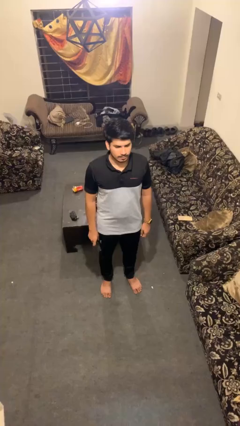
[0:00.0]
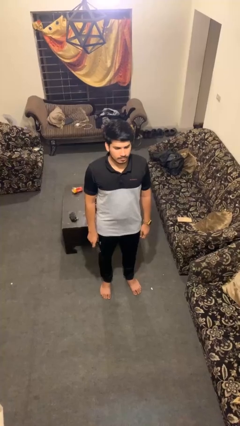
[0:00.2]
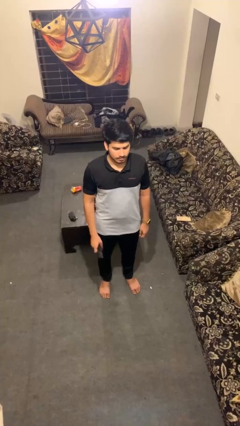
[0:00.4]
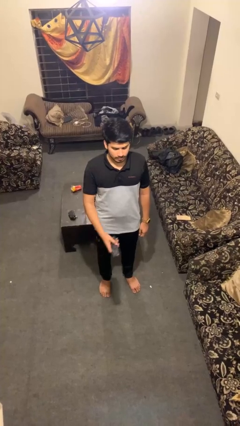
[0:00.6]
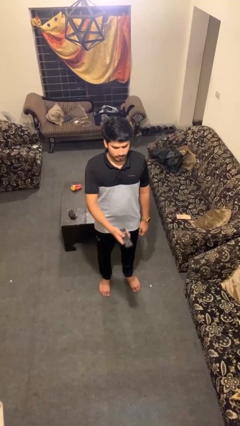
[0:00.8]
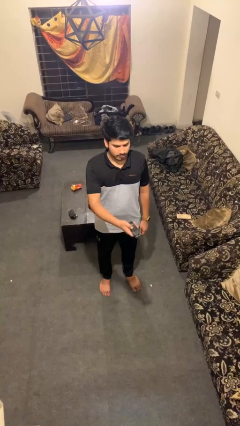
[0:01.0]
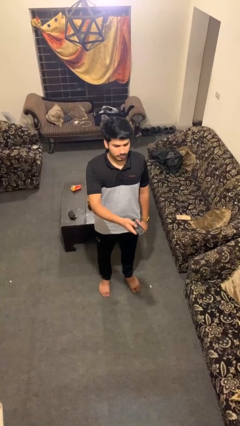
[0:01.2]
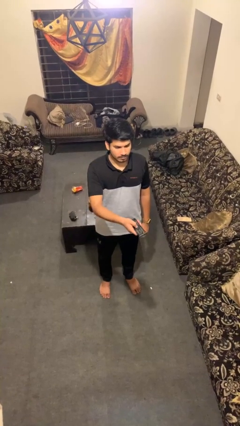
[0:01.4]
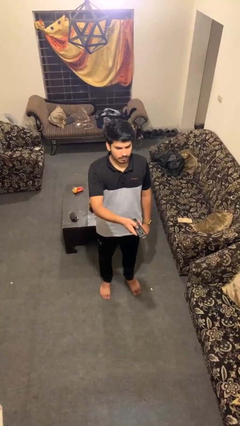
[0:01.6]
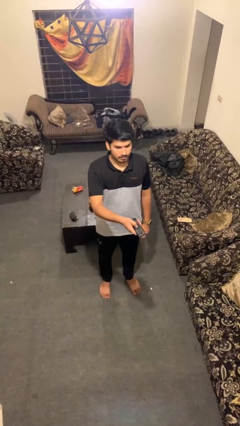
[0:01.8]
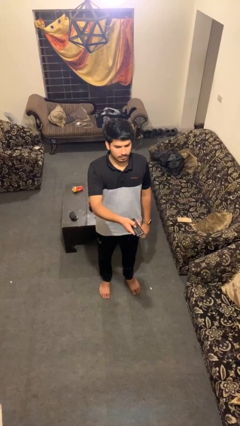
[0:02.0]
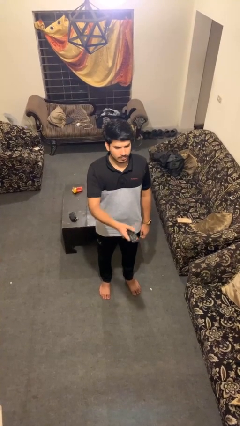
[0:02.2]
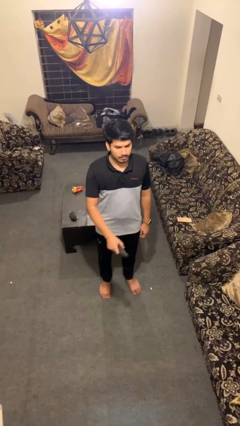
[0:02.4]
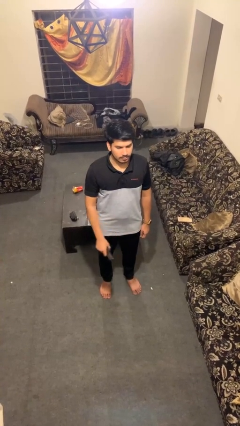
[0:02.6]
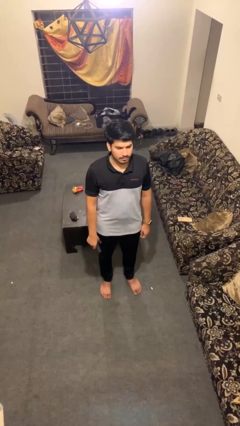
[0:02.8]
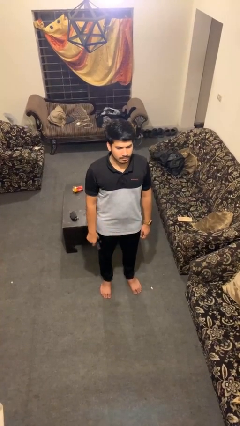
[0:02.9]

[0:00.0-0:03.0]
person uses television remote

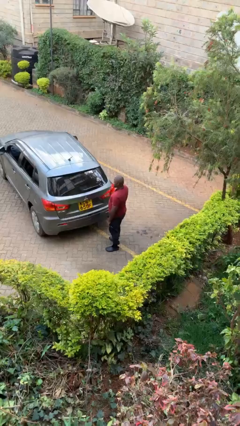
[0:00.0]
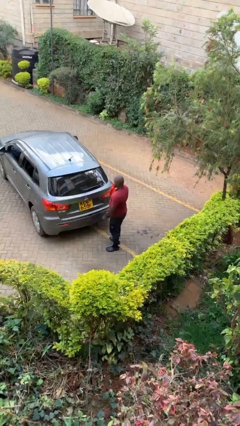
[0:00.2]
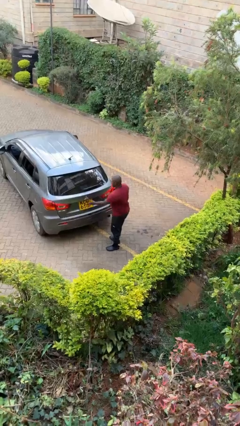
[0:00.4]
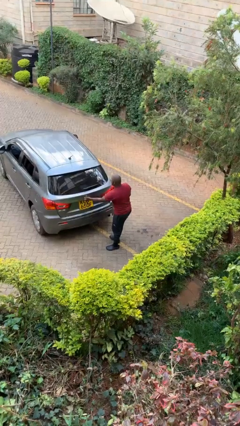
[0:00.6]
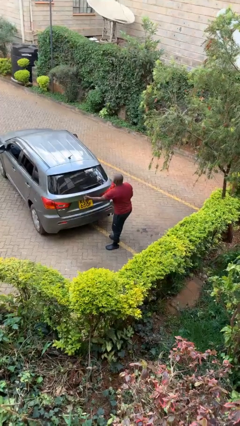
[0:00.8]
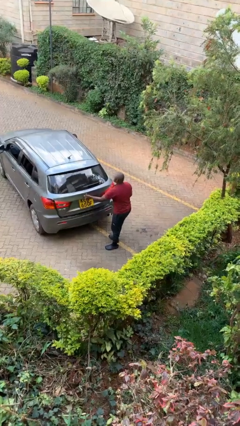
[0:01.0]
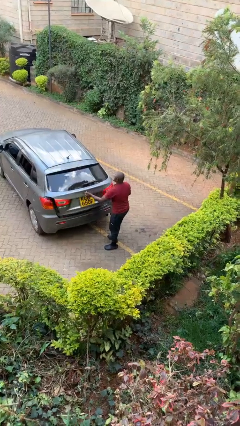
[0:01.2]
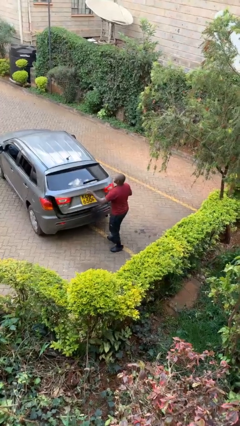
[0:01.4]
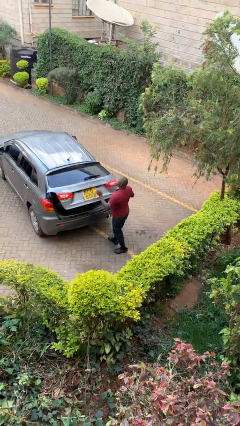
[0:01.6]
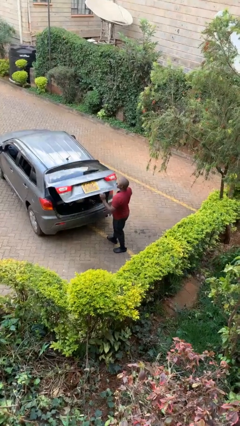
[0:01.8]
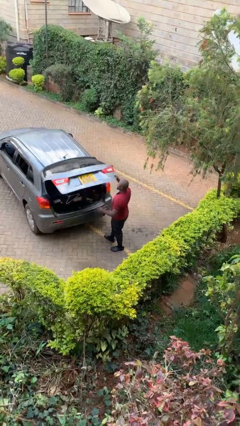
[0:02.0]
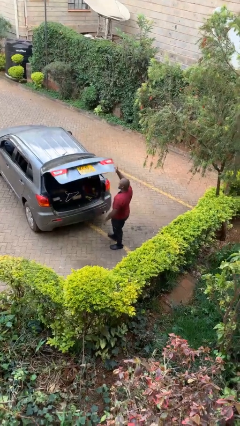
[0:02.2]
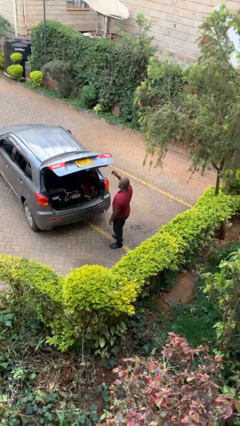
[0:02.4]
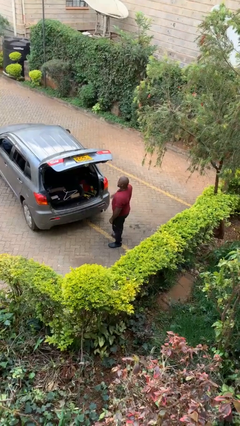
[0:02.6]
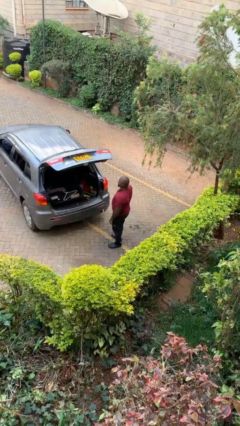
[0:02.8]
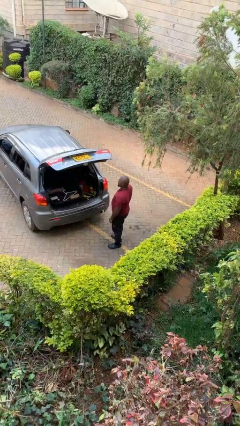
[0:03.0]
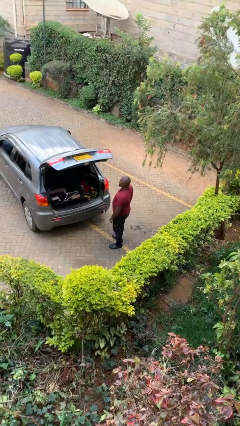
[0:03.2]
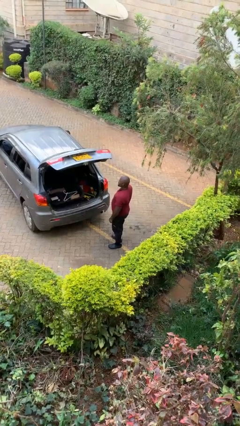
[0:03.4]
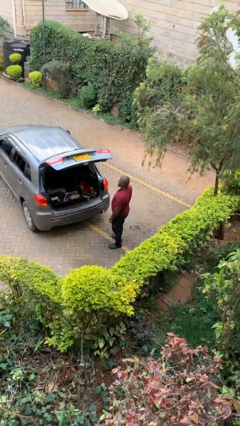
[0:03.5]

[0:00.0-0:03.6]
person opens car trunk

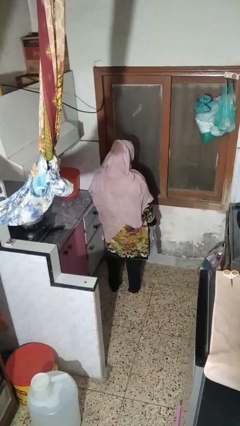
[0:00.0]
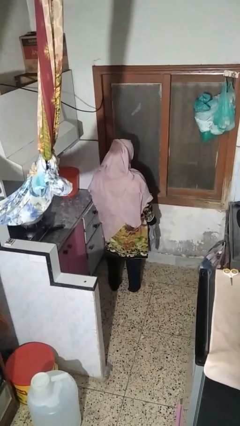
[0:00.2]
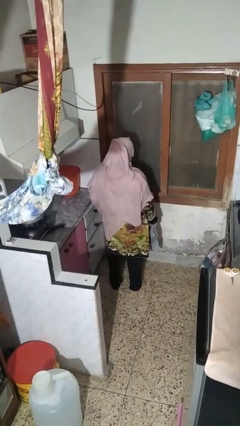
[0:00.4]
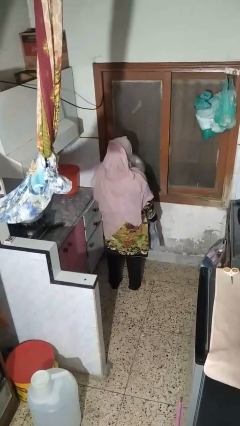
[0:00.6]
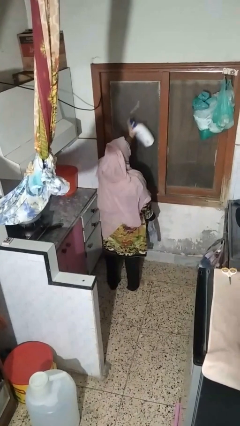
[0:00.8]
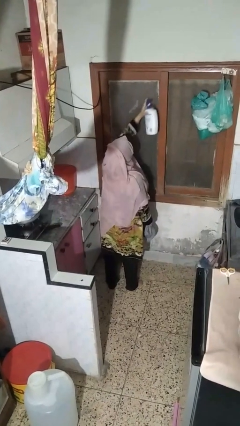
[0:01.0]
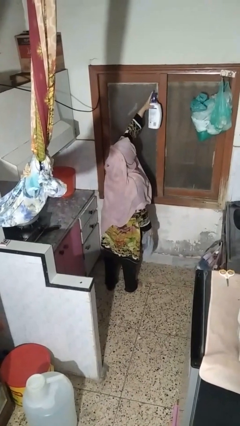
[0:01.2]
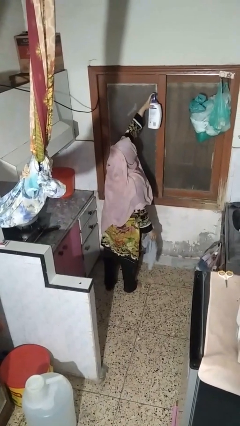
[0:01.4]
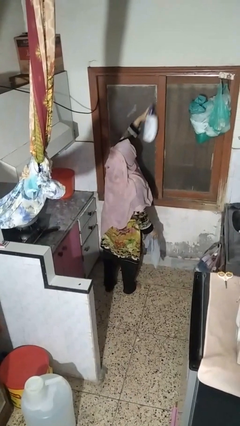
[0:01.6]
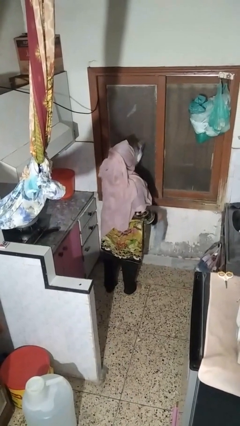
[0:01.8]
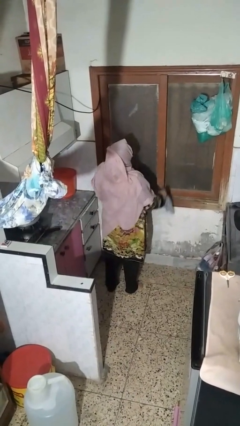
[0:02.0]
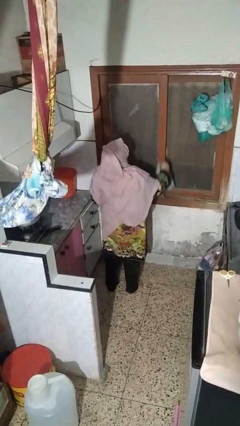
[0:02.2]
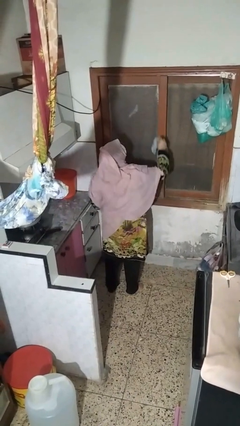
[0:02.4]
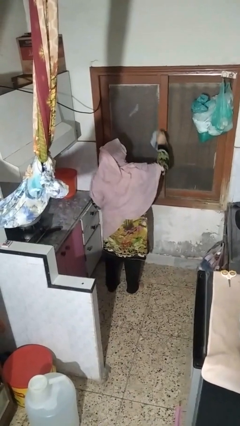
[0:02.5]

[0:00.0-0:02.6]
person sprays from bottle

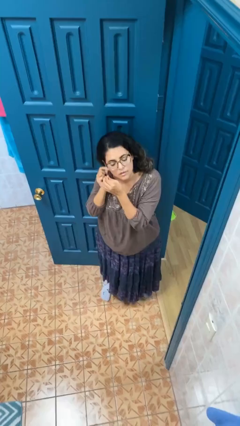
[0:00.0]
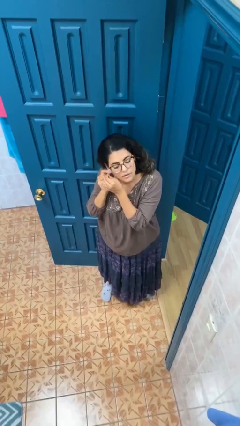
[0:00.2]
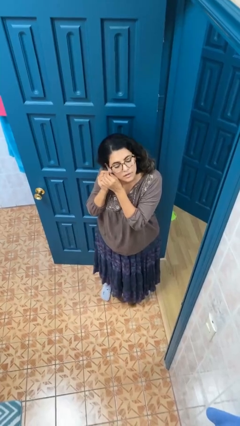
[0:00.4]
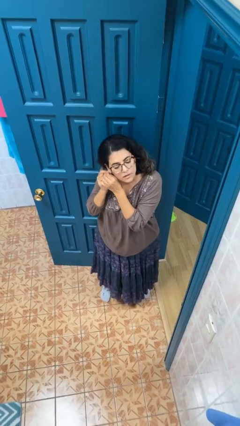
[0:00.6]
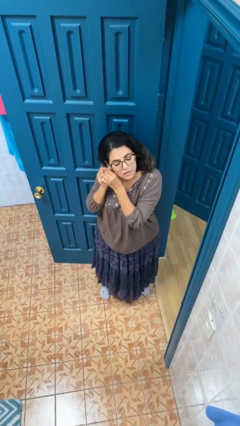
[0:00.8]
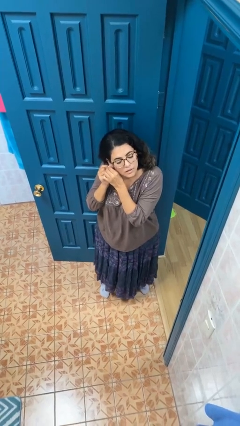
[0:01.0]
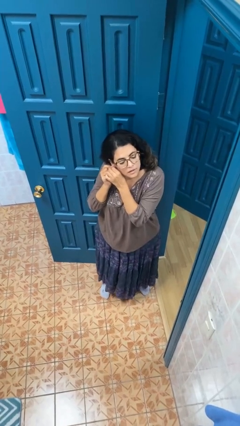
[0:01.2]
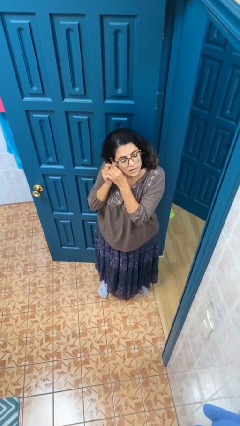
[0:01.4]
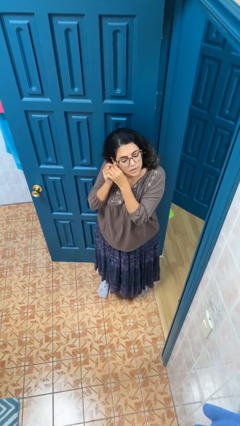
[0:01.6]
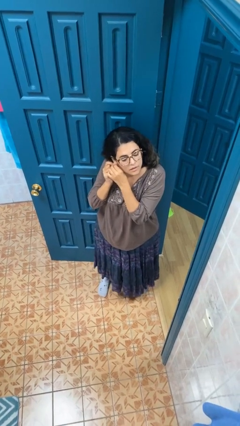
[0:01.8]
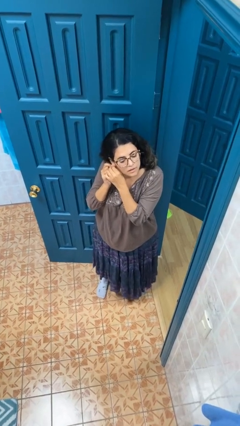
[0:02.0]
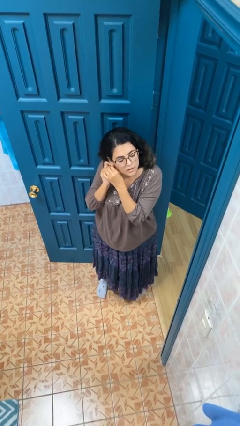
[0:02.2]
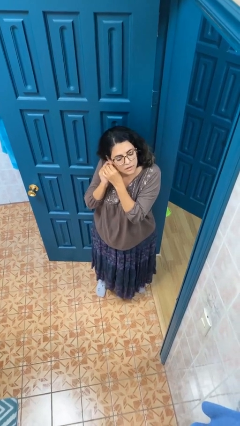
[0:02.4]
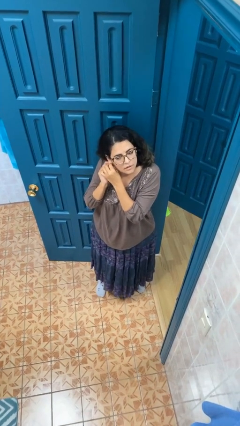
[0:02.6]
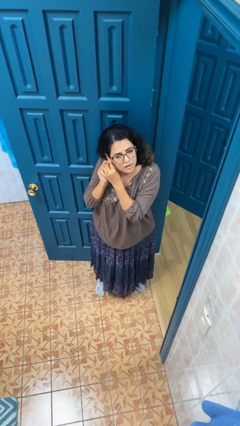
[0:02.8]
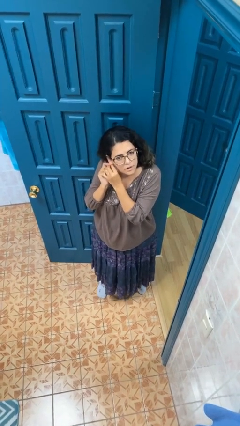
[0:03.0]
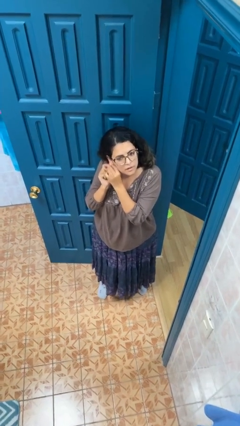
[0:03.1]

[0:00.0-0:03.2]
person puts on earrings

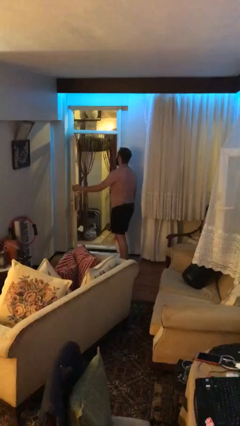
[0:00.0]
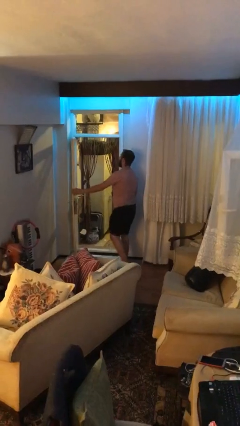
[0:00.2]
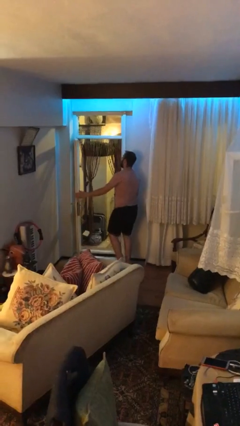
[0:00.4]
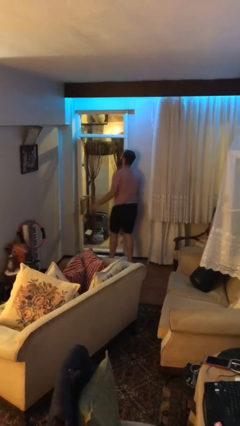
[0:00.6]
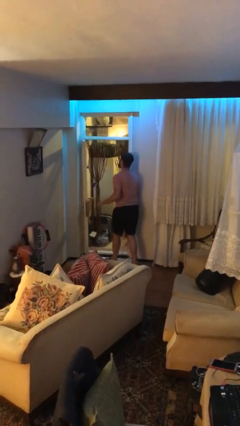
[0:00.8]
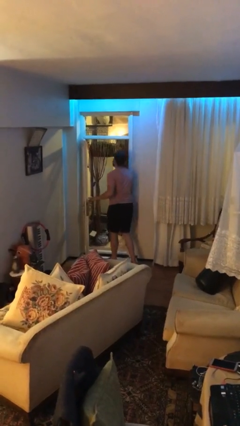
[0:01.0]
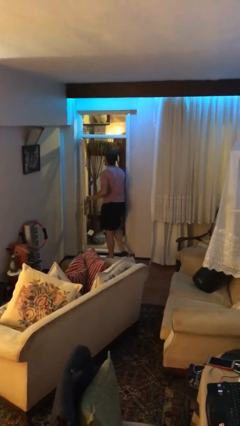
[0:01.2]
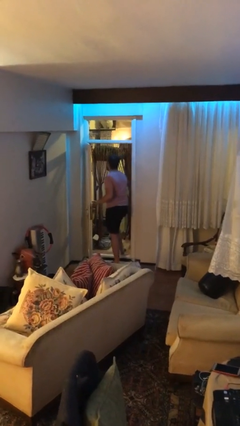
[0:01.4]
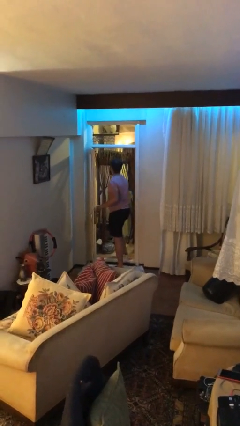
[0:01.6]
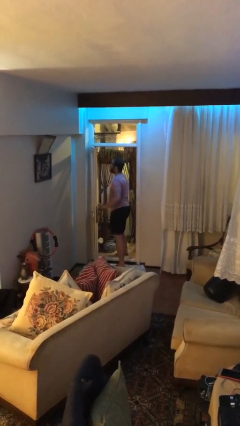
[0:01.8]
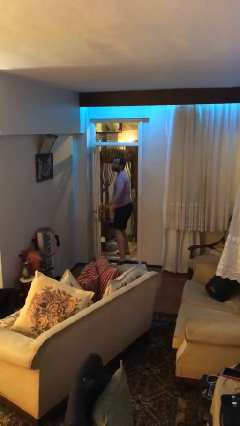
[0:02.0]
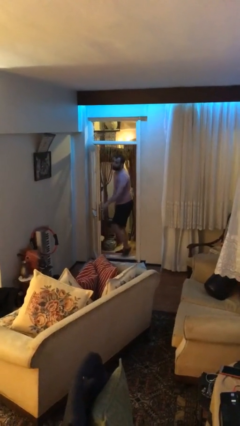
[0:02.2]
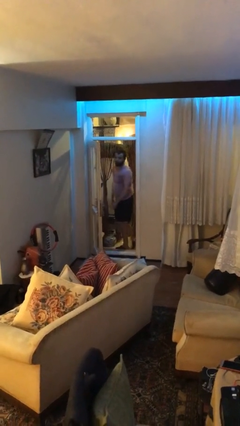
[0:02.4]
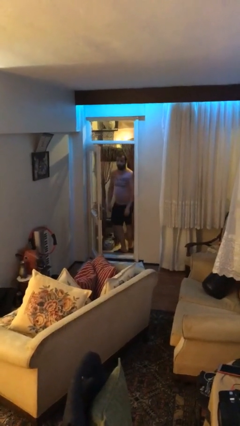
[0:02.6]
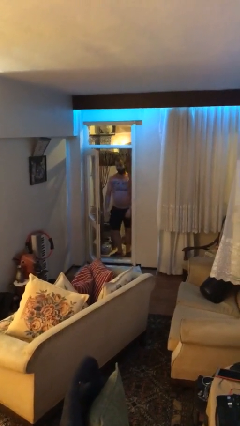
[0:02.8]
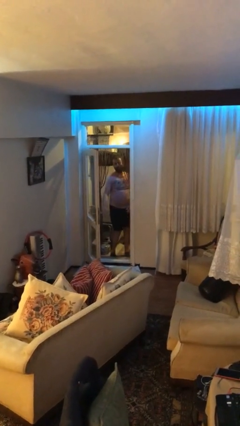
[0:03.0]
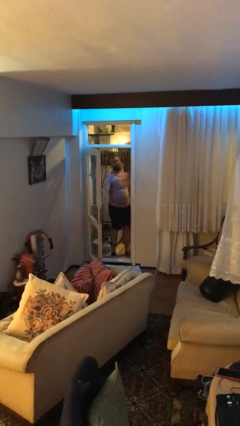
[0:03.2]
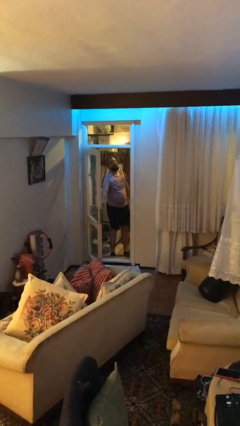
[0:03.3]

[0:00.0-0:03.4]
person exits scene through structure

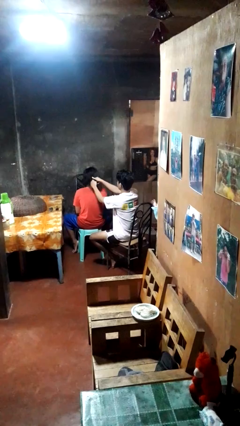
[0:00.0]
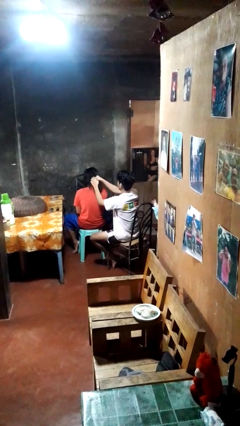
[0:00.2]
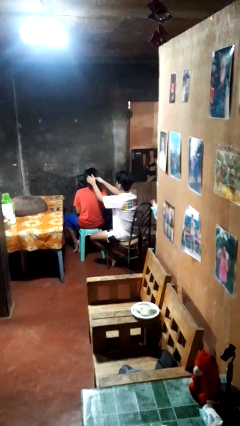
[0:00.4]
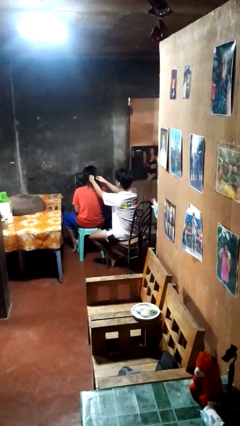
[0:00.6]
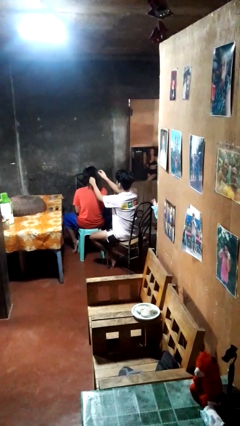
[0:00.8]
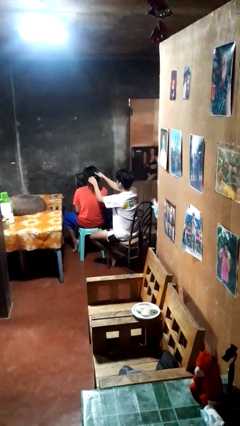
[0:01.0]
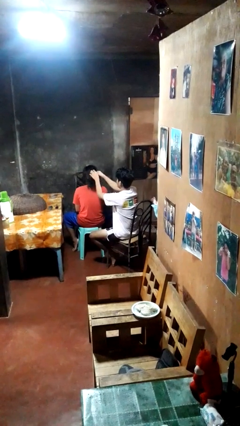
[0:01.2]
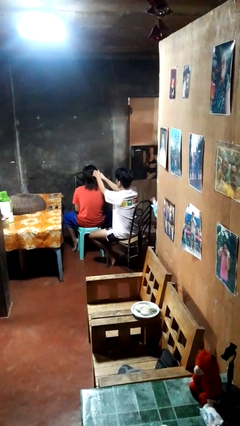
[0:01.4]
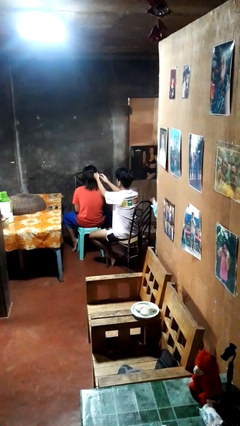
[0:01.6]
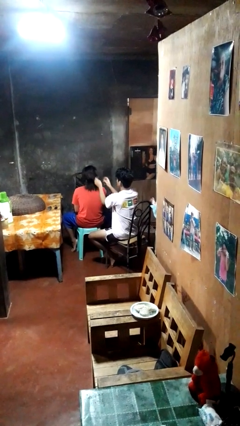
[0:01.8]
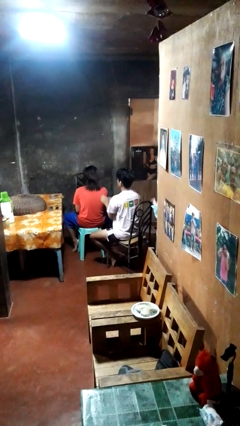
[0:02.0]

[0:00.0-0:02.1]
person braids hair of person
